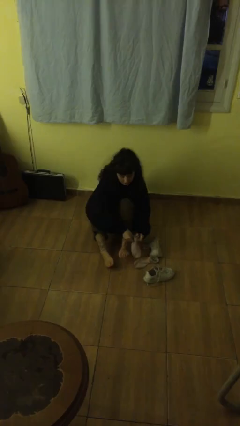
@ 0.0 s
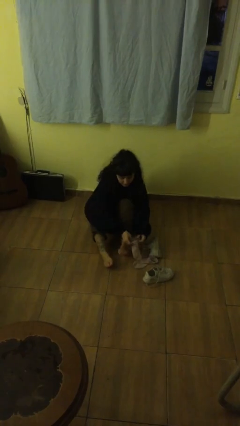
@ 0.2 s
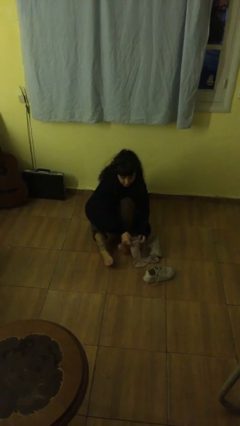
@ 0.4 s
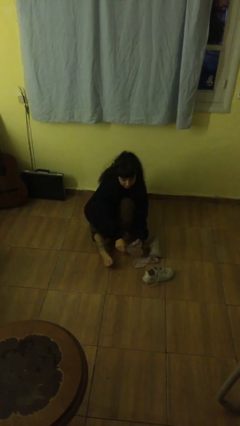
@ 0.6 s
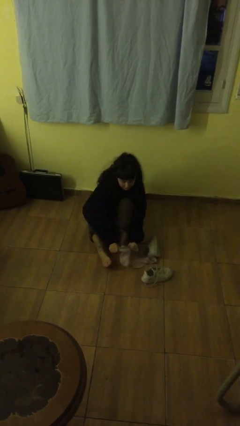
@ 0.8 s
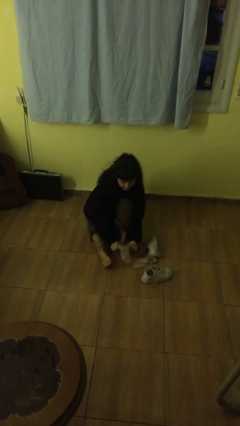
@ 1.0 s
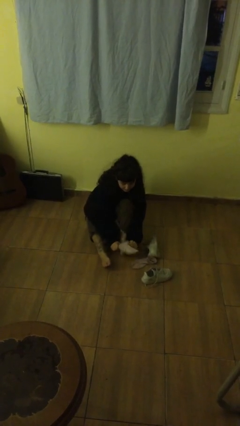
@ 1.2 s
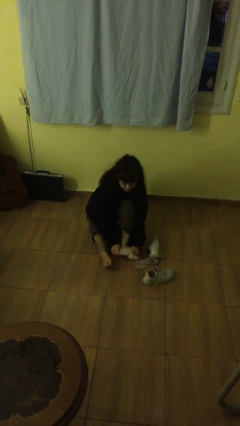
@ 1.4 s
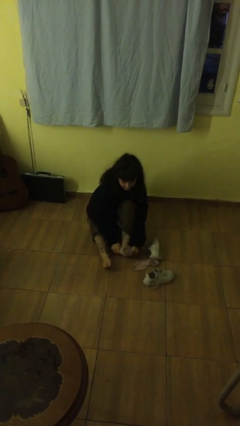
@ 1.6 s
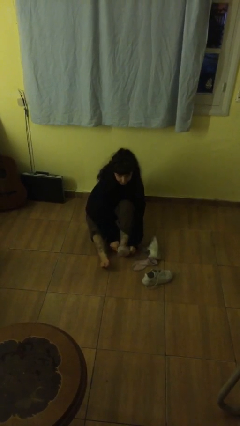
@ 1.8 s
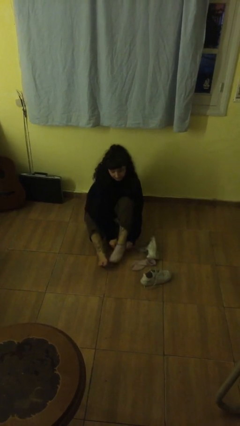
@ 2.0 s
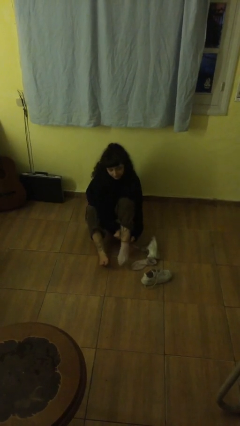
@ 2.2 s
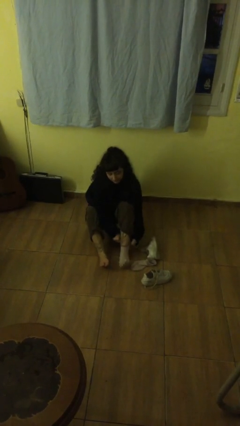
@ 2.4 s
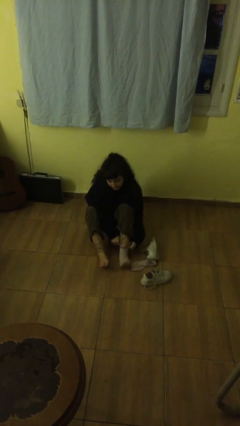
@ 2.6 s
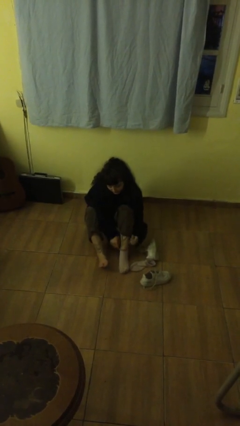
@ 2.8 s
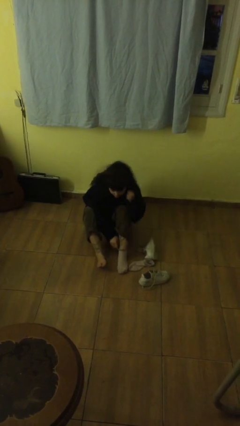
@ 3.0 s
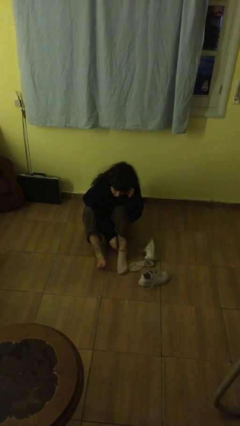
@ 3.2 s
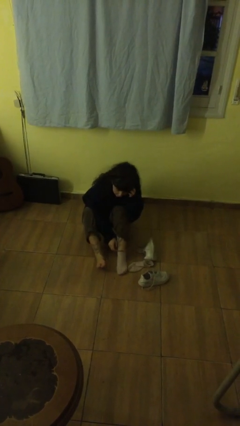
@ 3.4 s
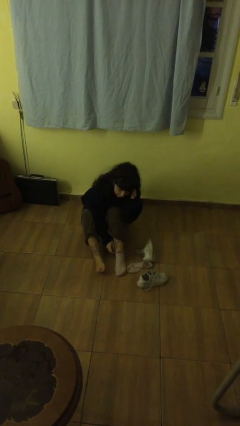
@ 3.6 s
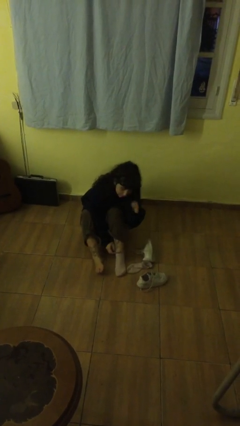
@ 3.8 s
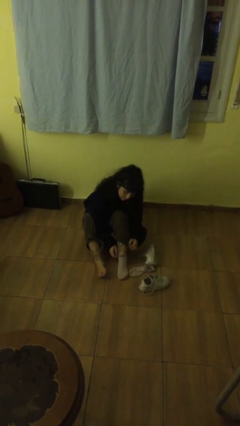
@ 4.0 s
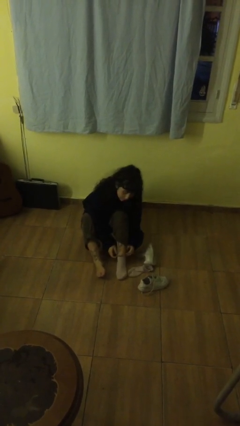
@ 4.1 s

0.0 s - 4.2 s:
person puts on socks

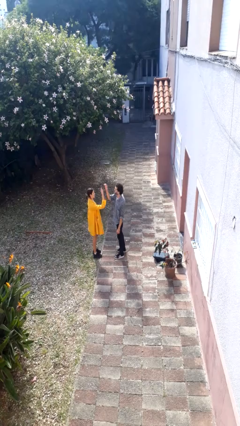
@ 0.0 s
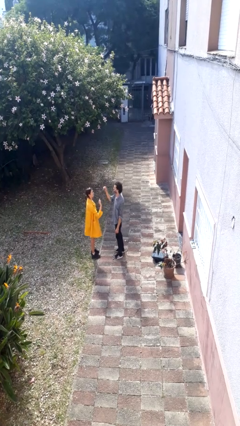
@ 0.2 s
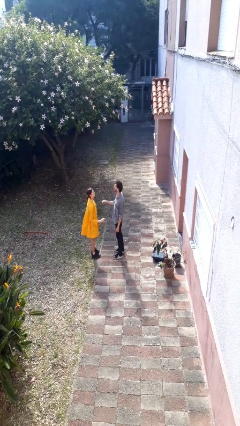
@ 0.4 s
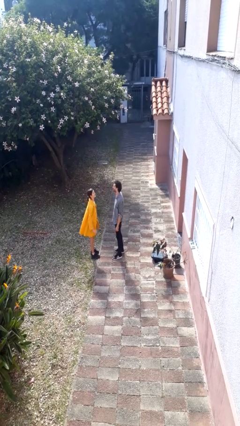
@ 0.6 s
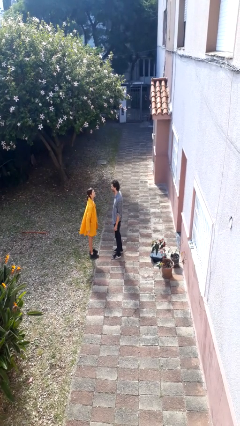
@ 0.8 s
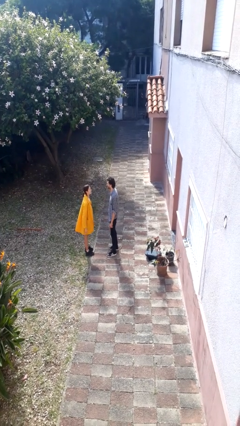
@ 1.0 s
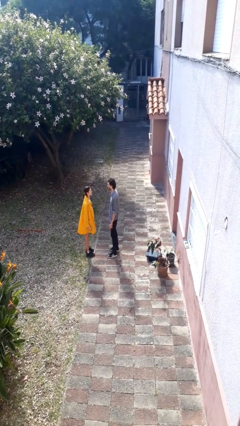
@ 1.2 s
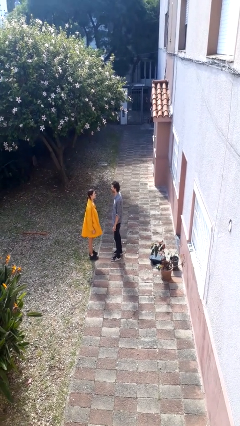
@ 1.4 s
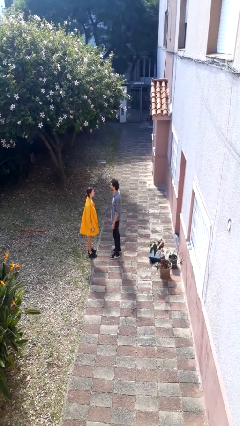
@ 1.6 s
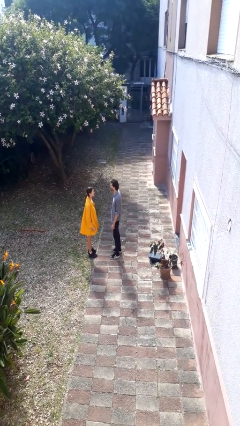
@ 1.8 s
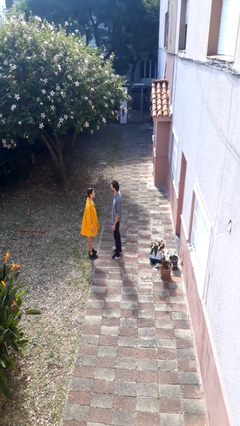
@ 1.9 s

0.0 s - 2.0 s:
person highfives hand

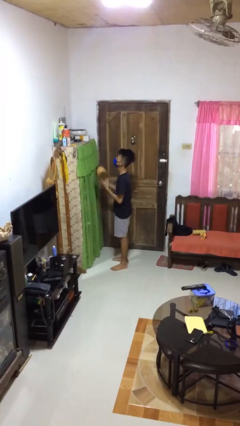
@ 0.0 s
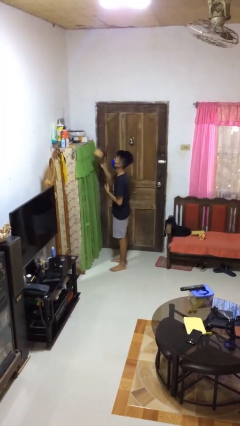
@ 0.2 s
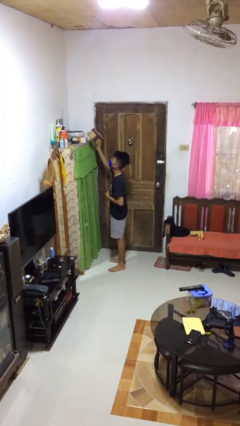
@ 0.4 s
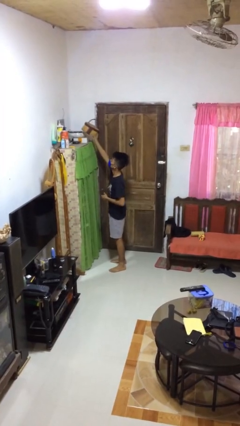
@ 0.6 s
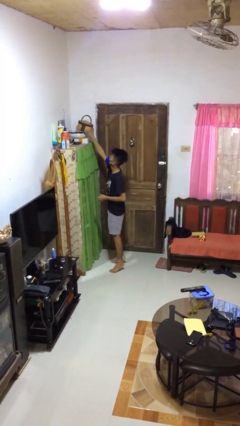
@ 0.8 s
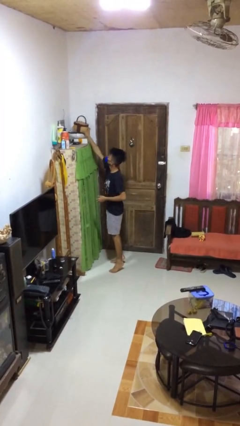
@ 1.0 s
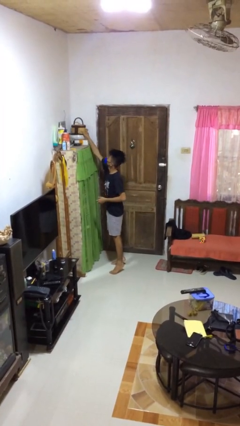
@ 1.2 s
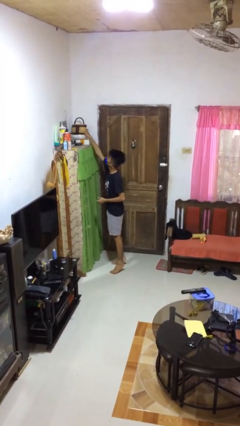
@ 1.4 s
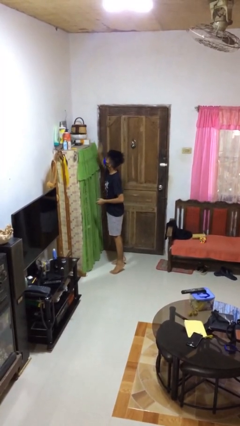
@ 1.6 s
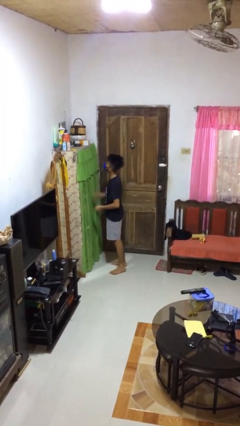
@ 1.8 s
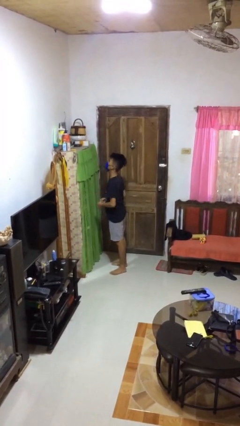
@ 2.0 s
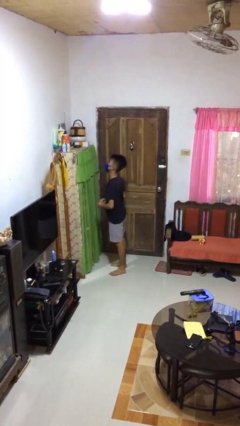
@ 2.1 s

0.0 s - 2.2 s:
person puts down object on shelf

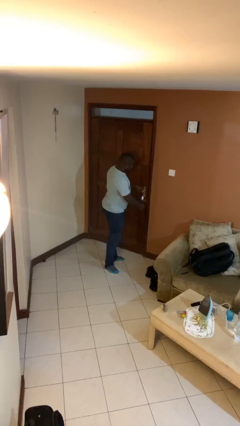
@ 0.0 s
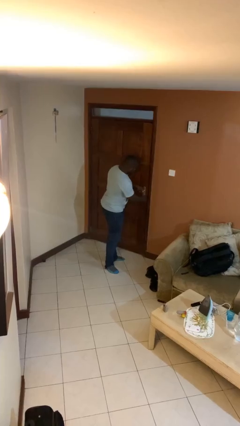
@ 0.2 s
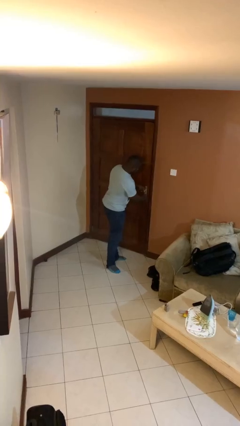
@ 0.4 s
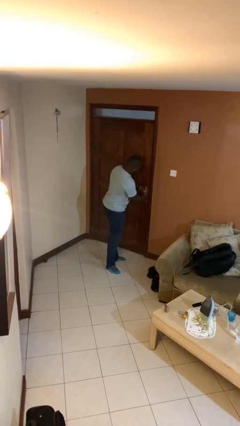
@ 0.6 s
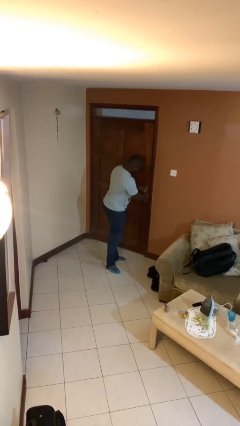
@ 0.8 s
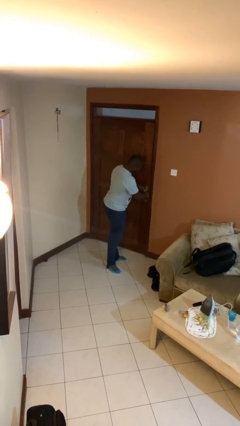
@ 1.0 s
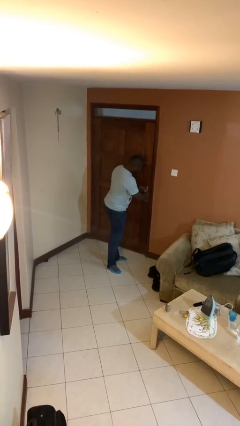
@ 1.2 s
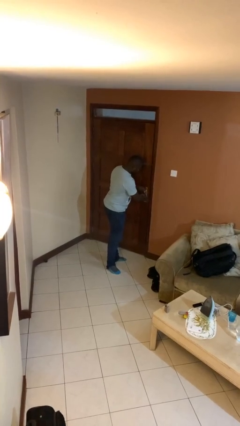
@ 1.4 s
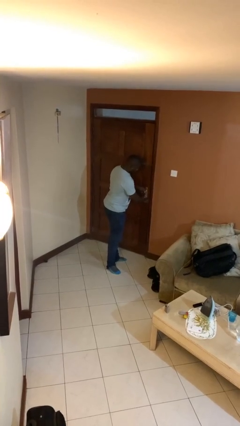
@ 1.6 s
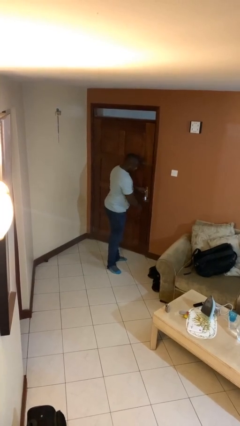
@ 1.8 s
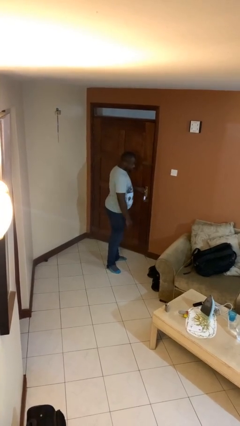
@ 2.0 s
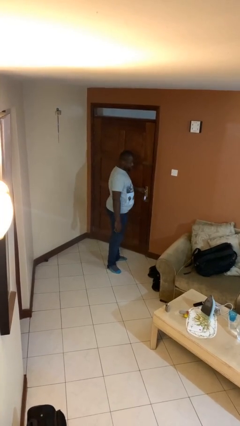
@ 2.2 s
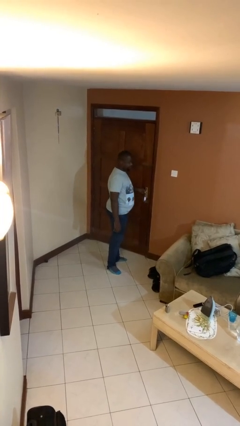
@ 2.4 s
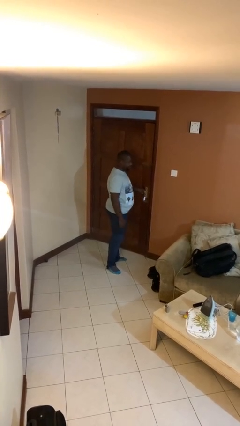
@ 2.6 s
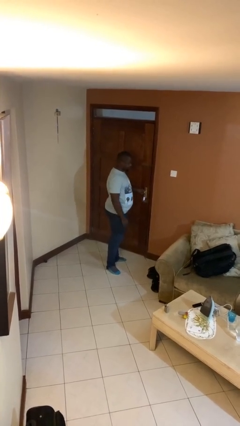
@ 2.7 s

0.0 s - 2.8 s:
person unlocks door with keys

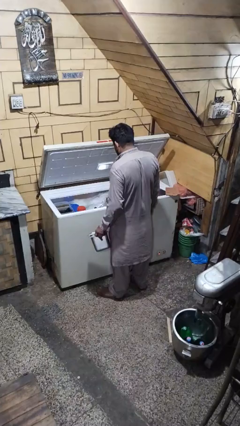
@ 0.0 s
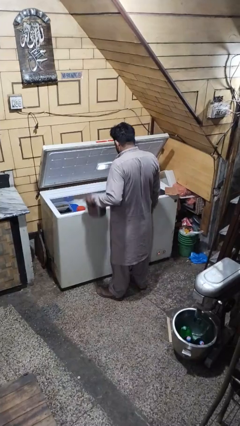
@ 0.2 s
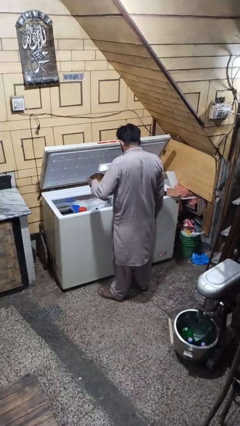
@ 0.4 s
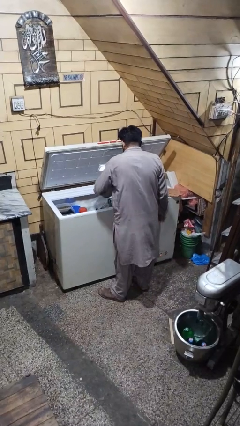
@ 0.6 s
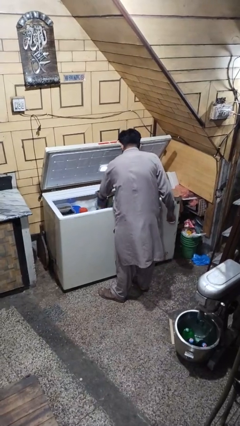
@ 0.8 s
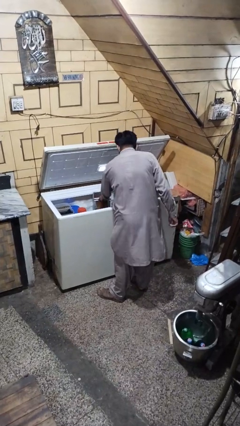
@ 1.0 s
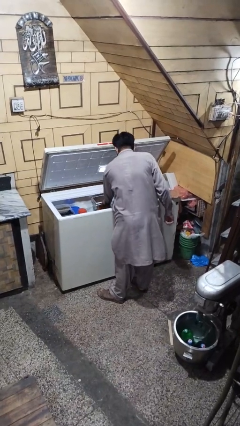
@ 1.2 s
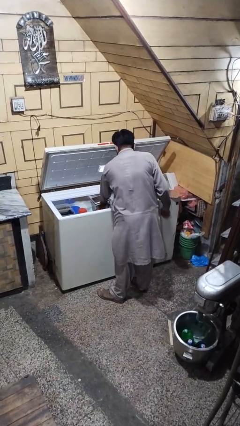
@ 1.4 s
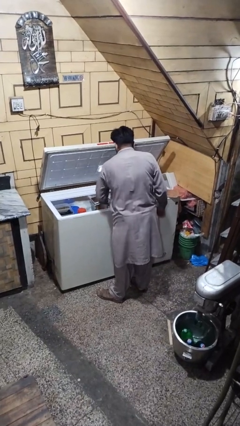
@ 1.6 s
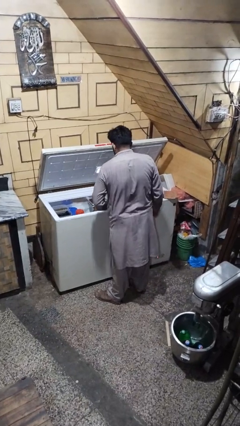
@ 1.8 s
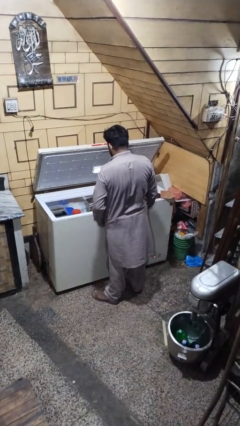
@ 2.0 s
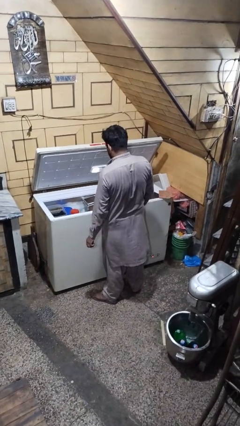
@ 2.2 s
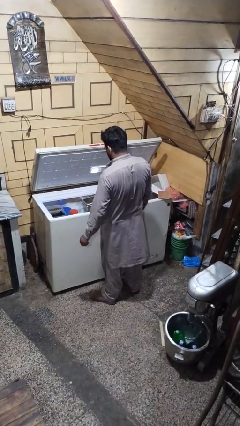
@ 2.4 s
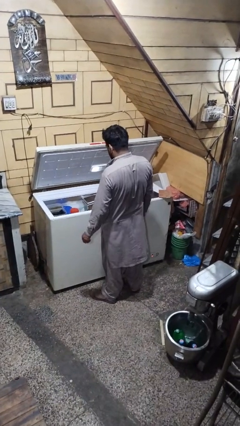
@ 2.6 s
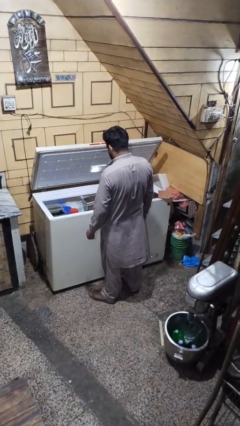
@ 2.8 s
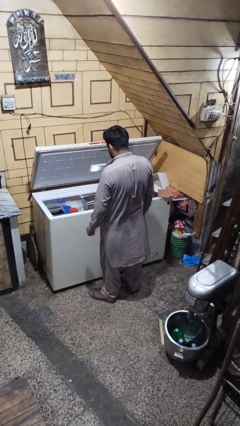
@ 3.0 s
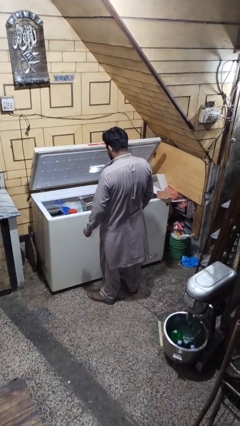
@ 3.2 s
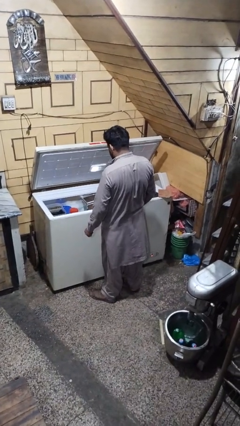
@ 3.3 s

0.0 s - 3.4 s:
person puts object into refrigerator

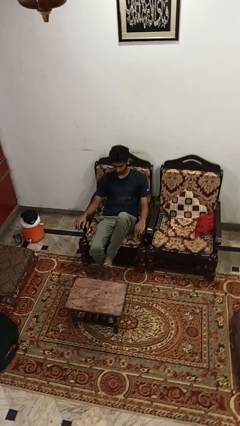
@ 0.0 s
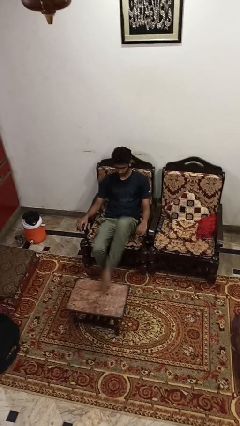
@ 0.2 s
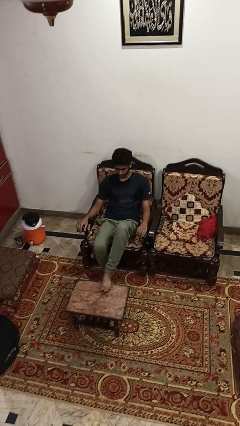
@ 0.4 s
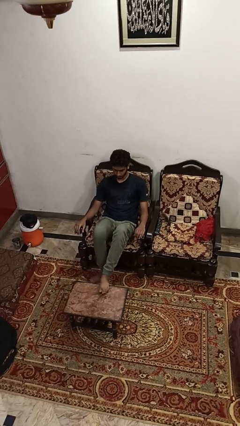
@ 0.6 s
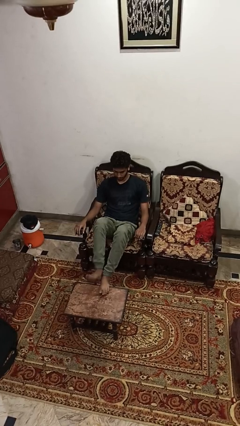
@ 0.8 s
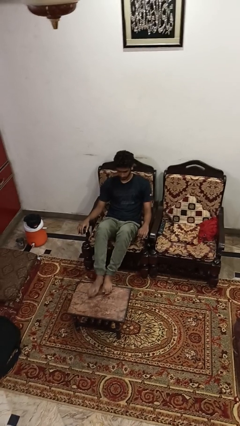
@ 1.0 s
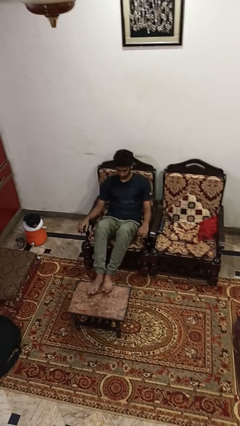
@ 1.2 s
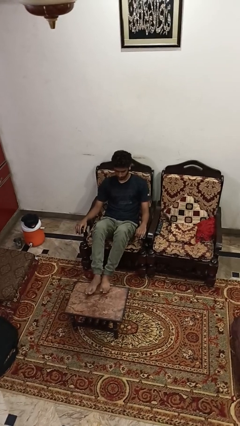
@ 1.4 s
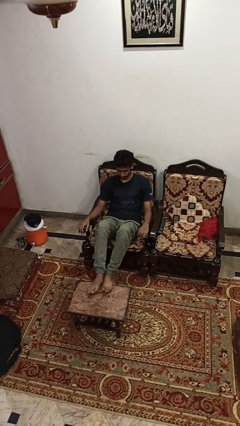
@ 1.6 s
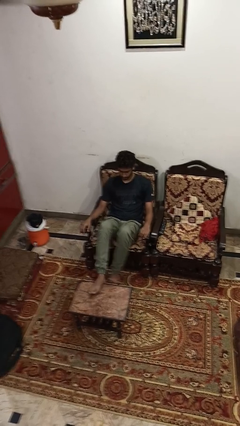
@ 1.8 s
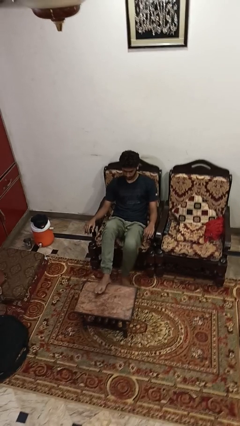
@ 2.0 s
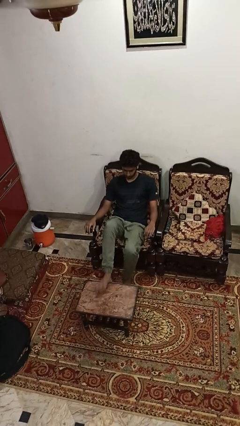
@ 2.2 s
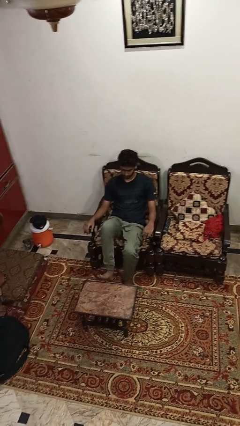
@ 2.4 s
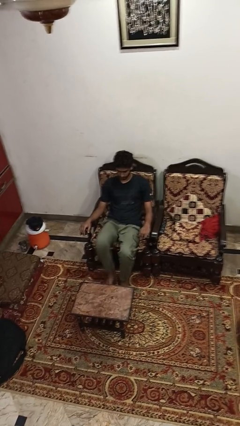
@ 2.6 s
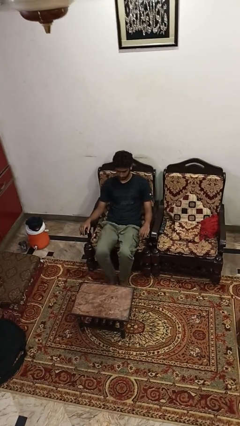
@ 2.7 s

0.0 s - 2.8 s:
person puts feet up
